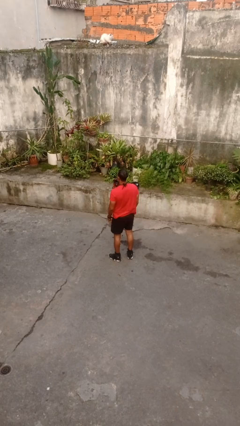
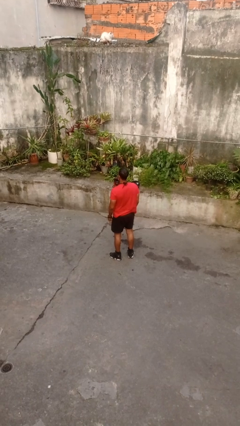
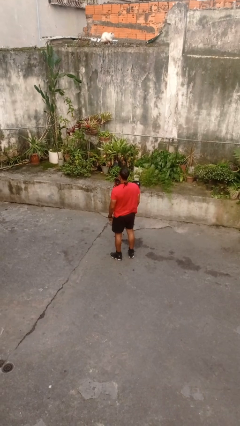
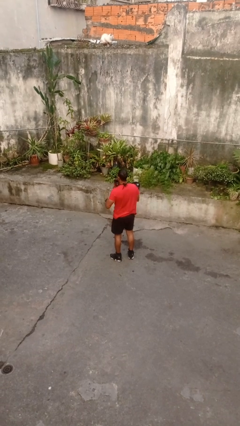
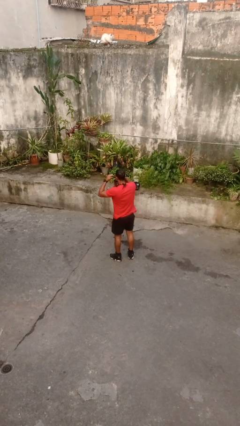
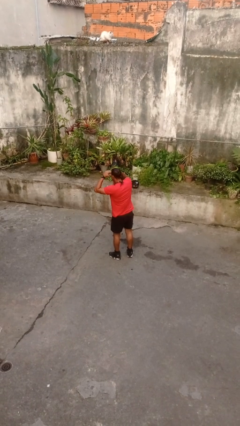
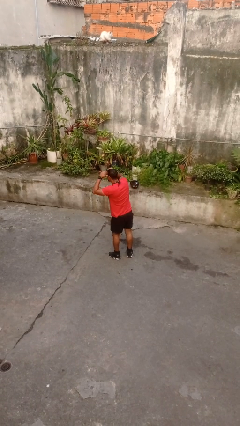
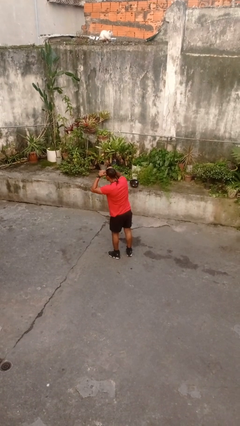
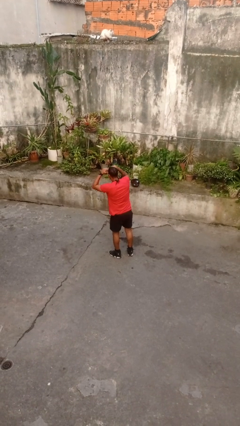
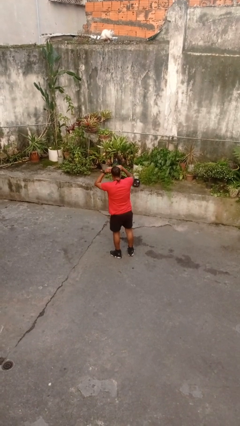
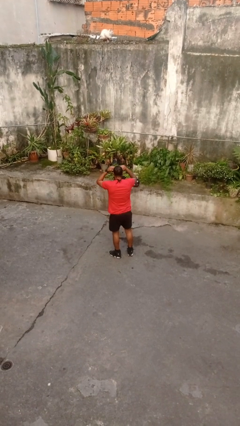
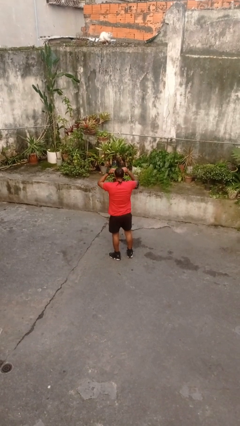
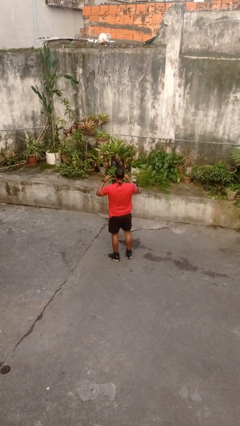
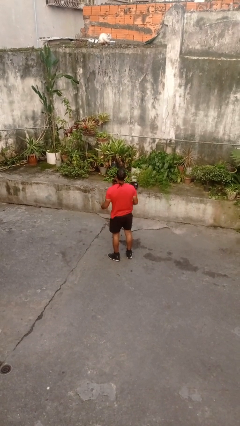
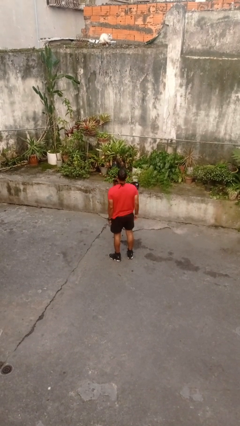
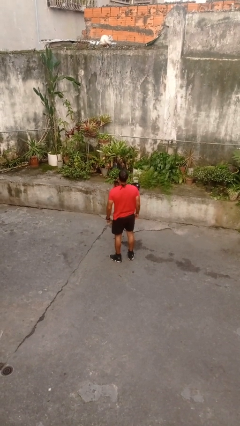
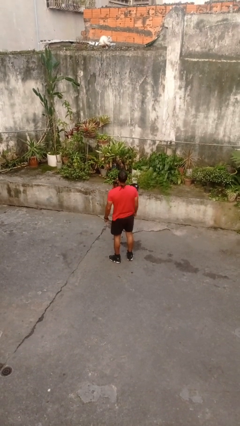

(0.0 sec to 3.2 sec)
person shades eyes

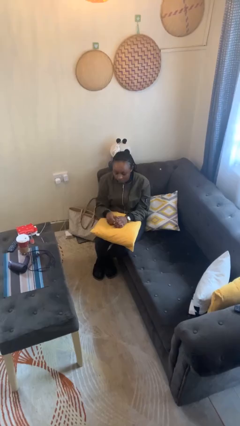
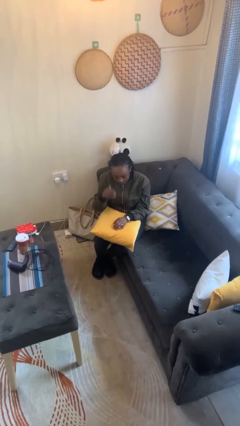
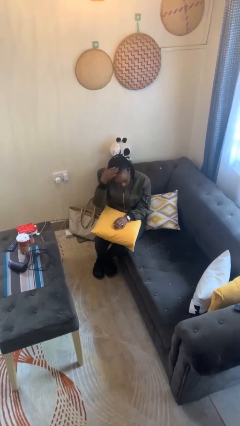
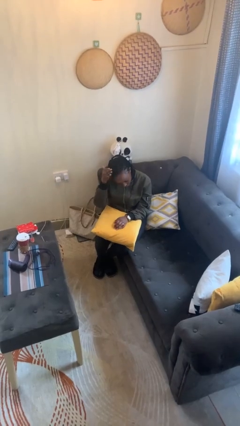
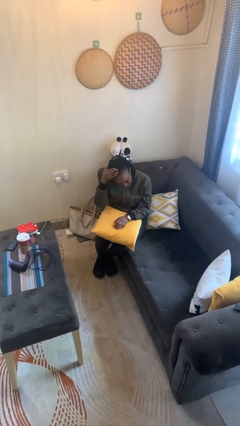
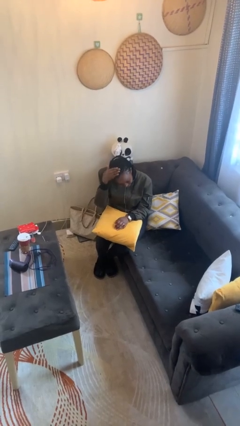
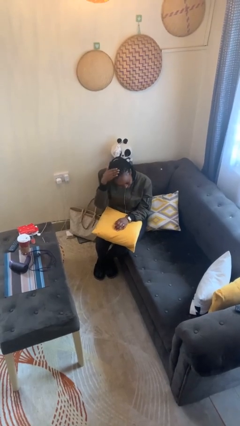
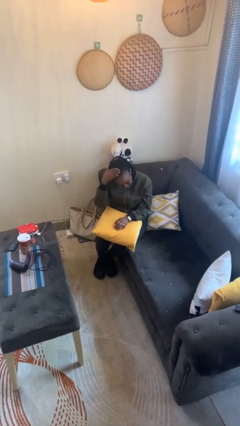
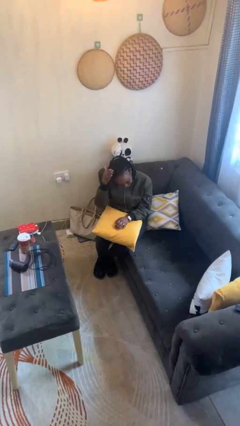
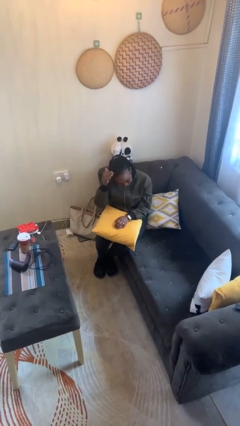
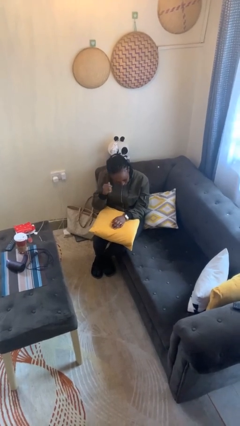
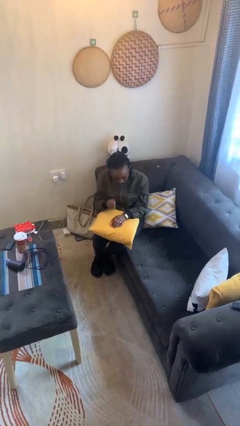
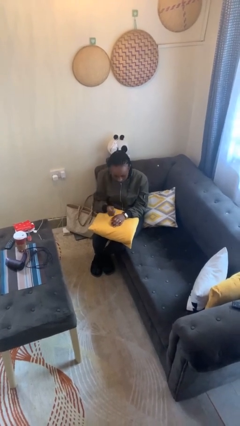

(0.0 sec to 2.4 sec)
person pats head

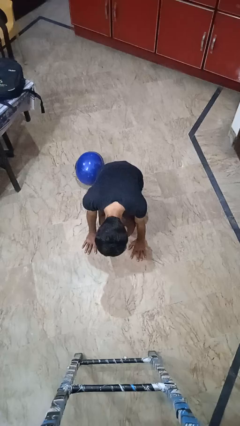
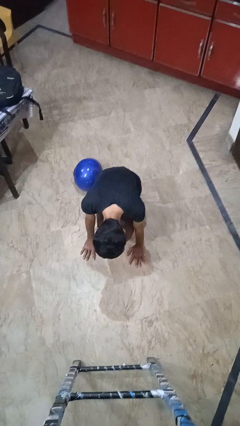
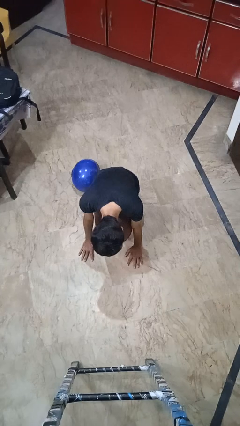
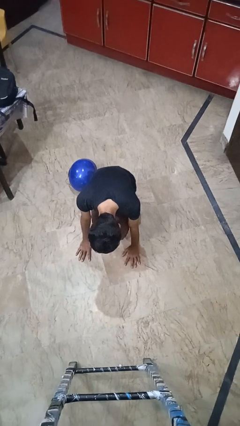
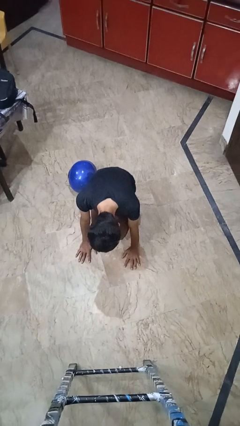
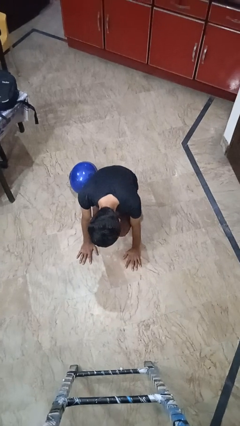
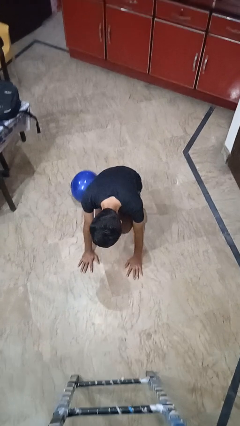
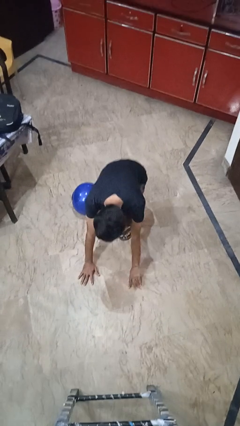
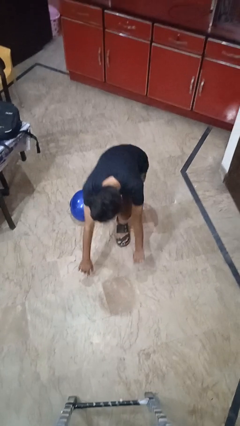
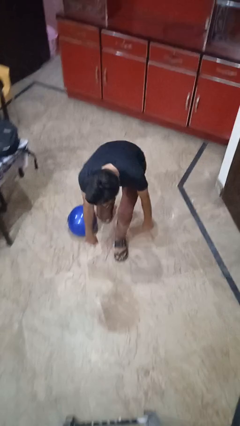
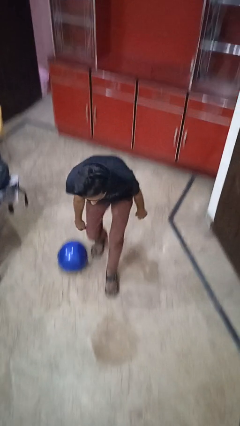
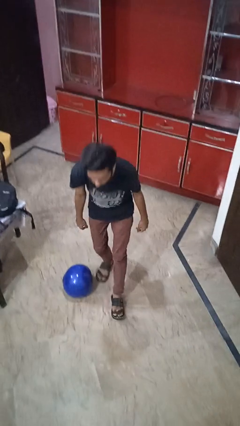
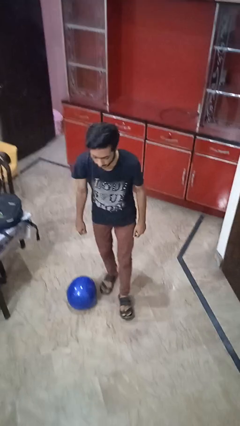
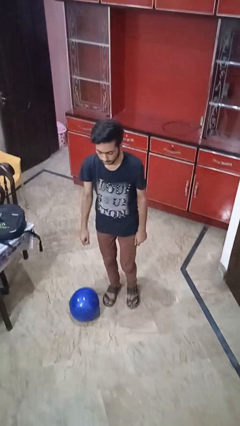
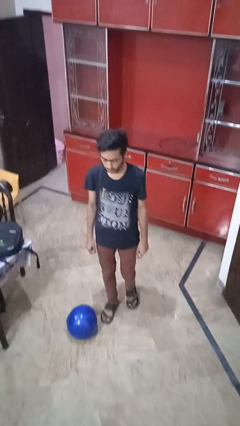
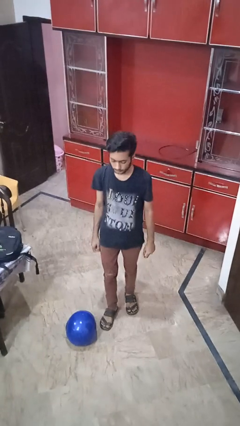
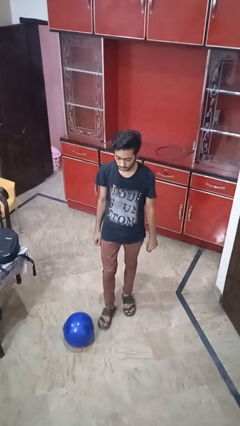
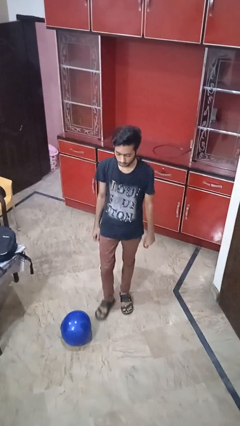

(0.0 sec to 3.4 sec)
person takes phone from pocket

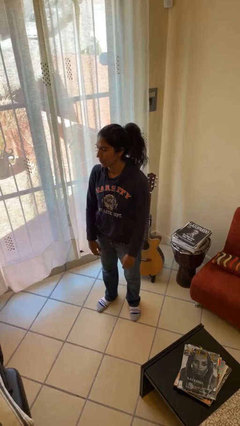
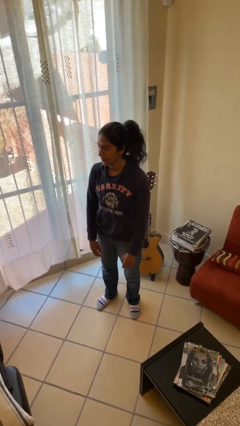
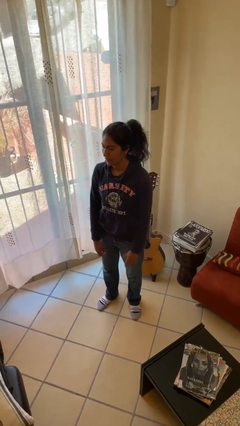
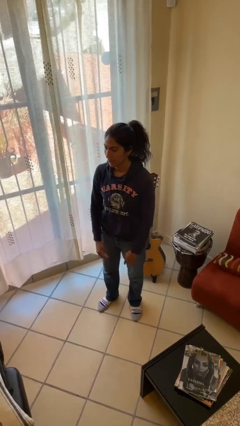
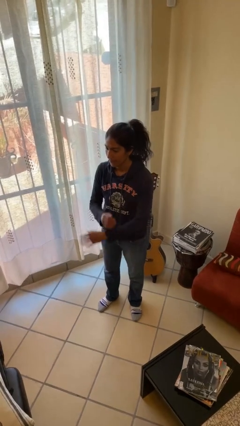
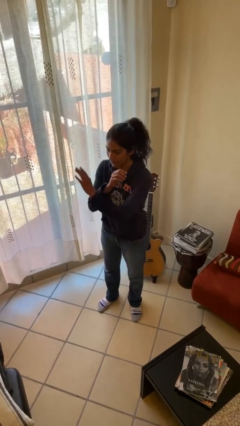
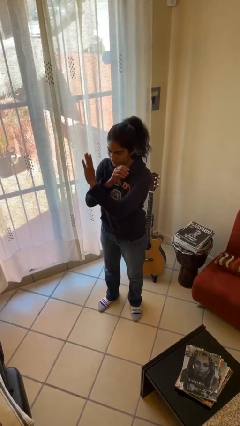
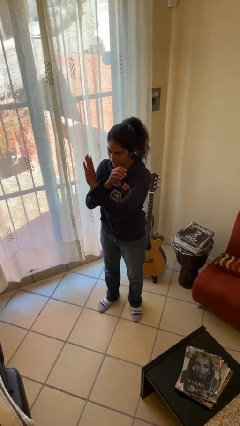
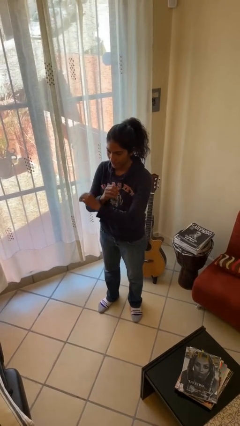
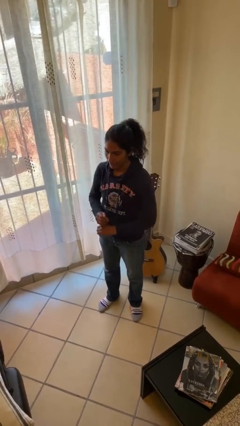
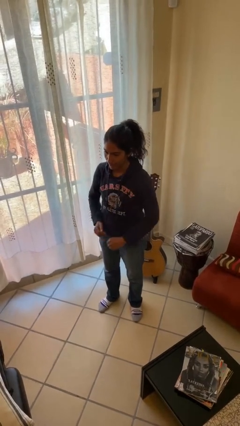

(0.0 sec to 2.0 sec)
person gestures arms x

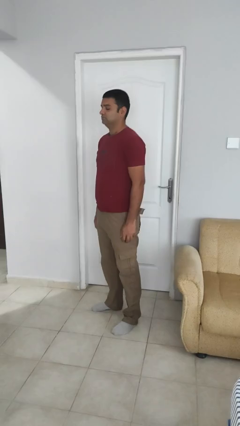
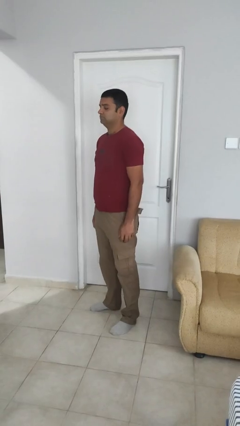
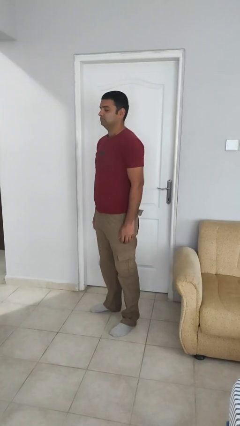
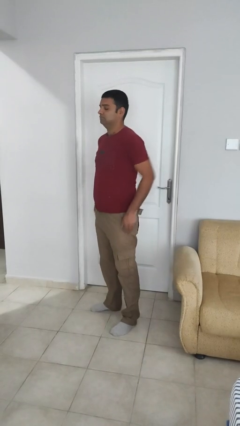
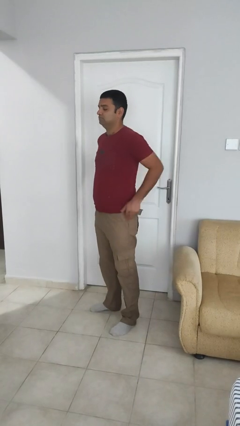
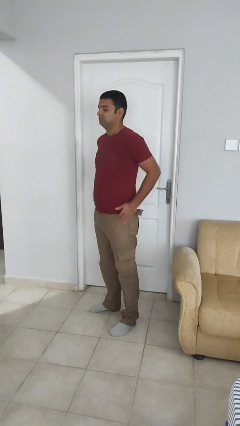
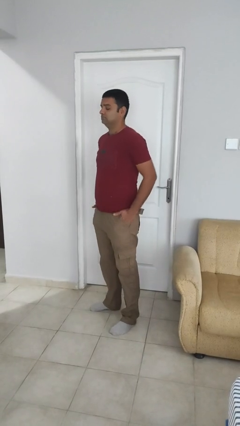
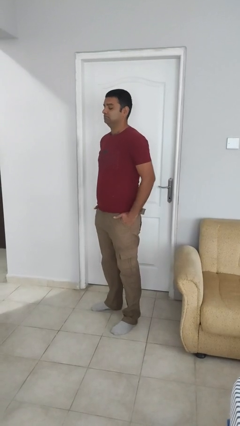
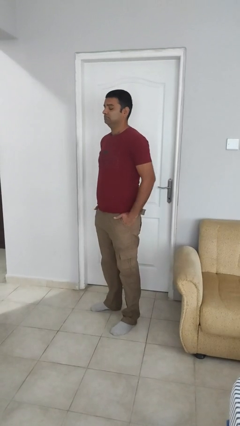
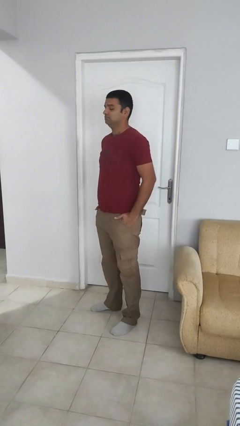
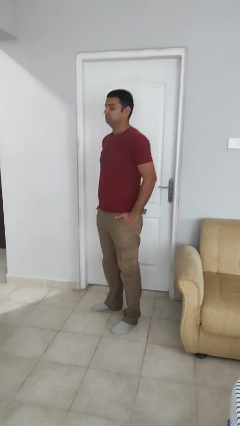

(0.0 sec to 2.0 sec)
person puts hands in back pockets

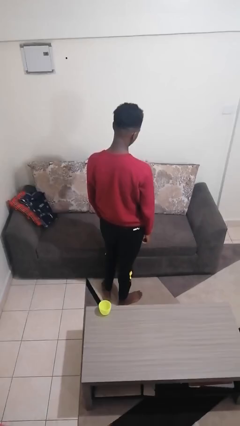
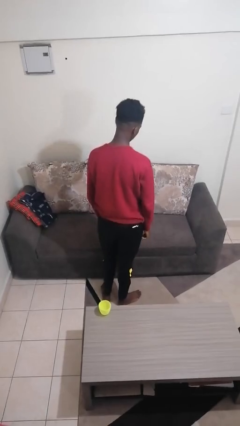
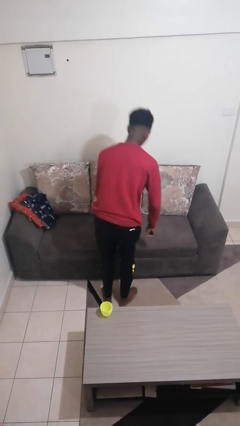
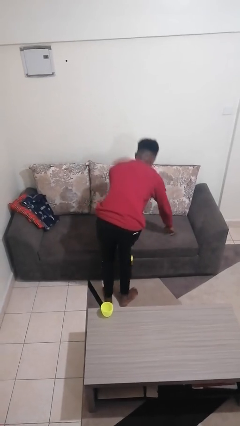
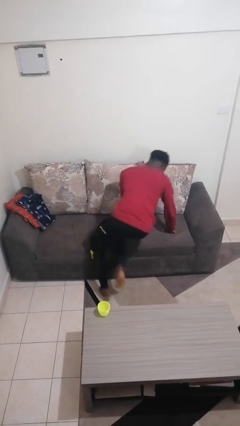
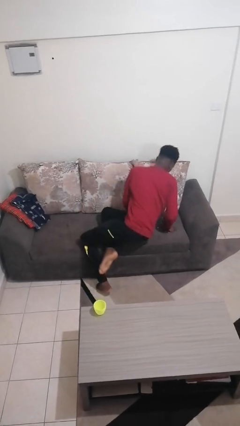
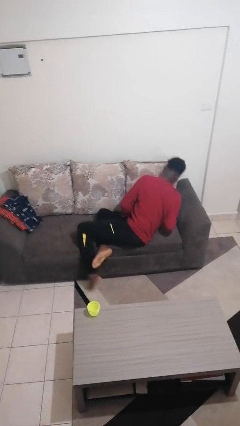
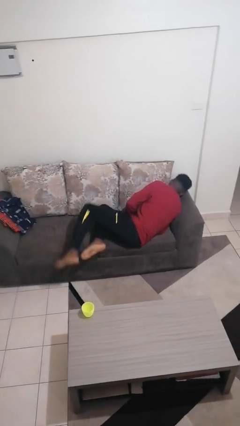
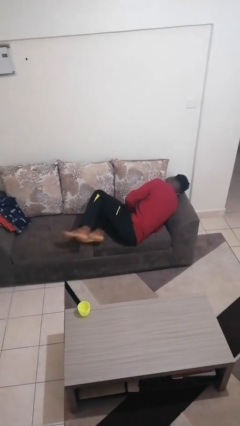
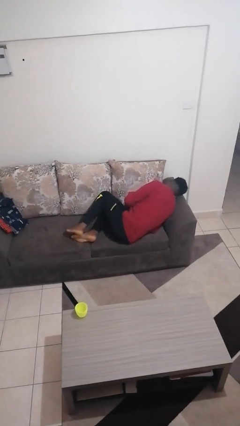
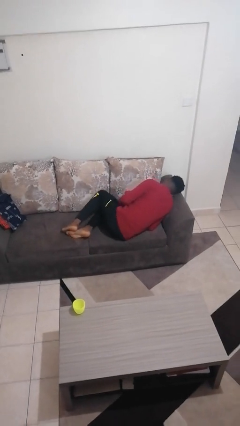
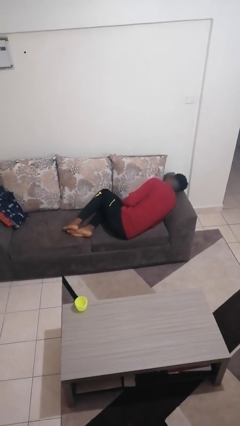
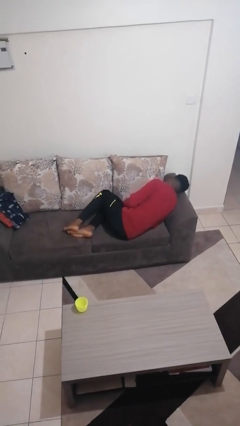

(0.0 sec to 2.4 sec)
person lies down on couch

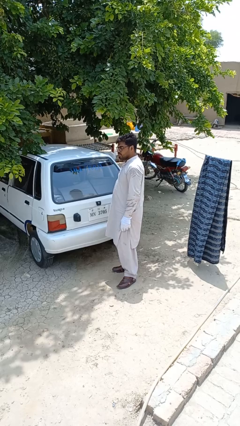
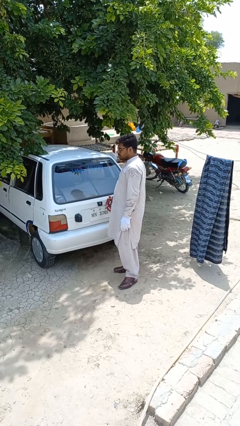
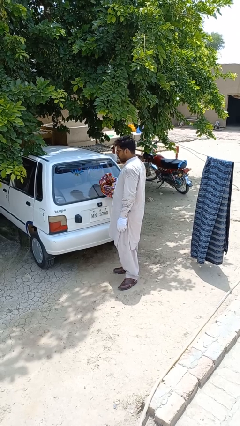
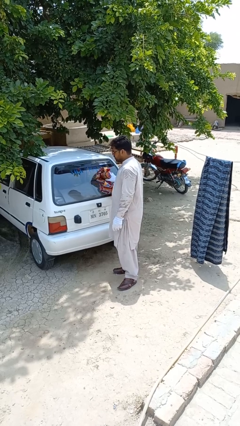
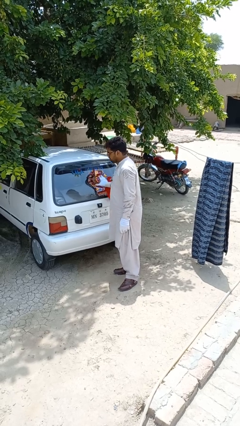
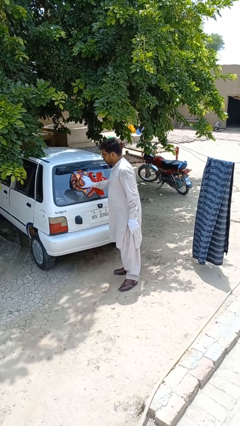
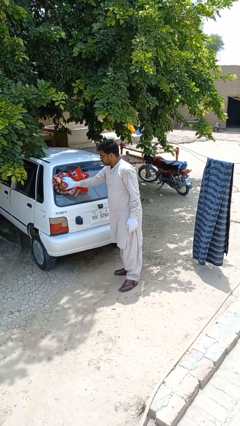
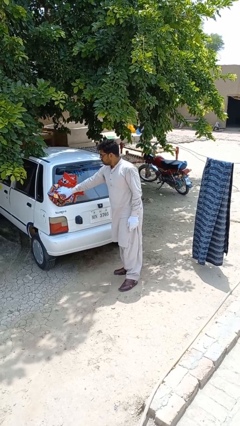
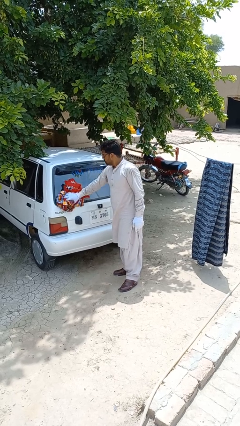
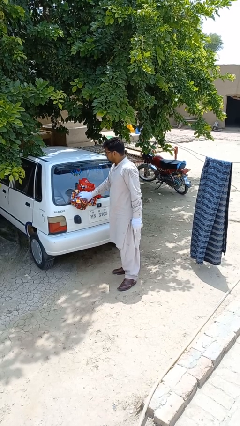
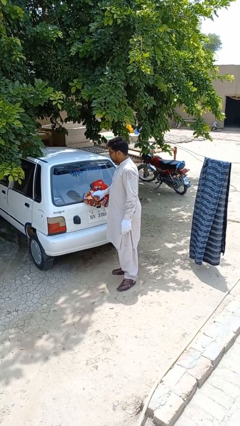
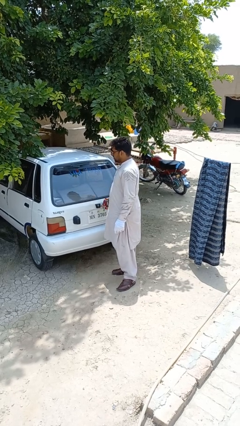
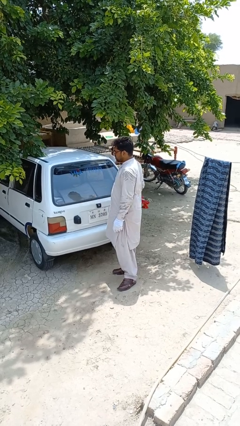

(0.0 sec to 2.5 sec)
person polishes car with rag
